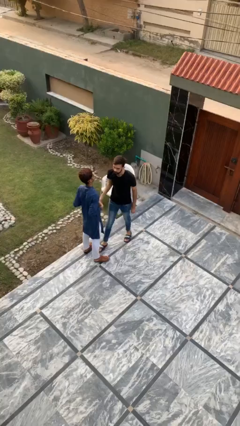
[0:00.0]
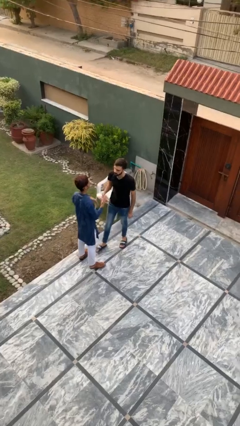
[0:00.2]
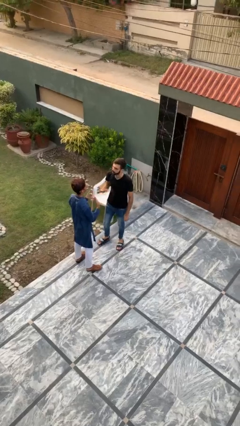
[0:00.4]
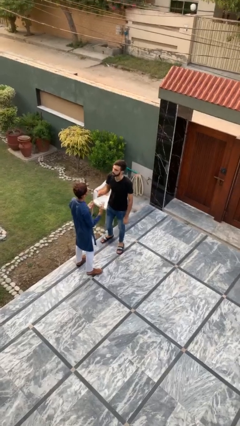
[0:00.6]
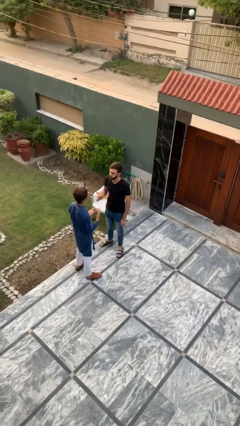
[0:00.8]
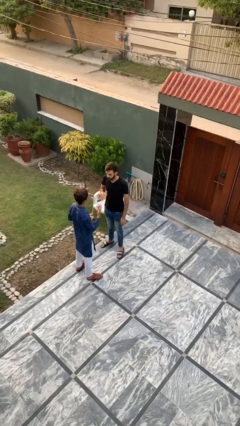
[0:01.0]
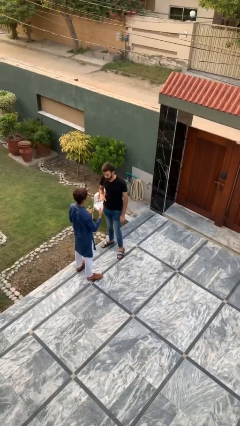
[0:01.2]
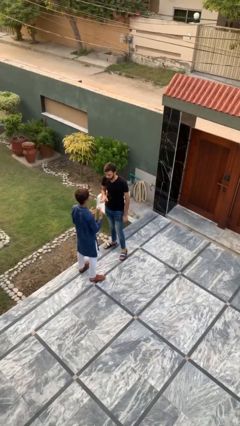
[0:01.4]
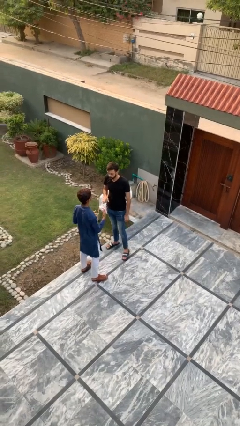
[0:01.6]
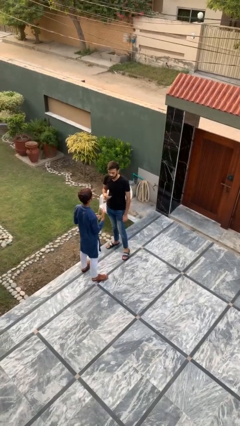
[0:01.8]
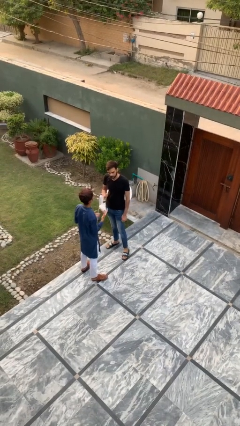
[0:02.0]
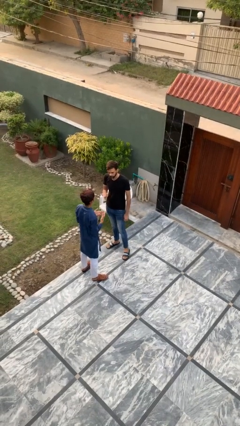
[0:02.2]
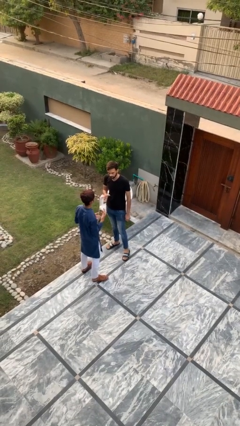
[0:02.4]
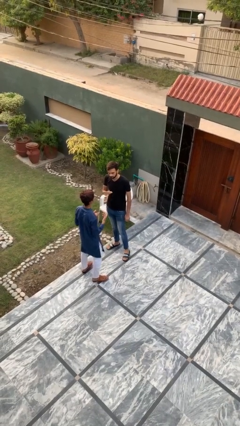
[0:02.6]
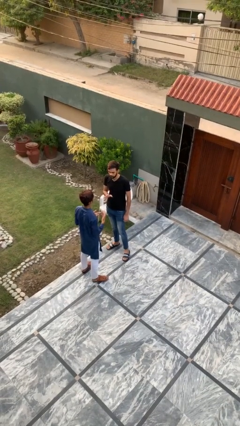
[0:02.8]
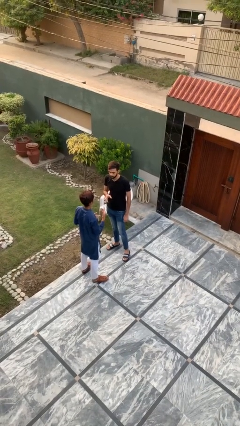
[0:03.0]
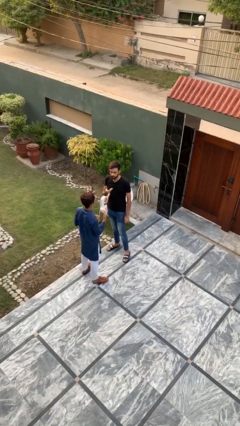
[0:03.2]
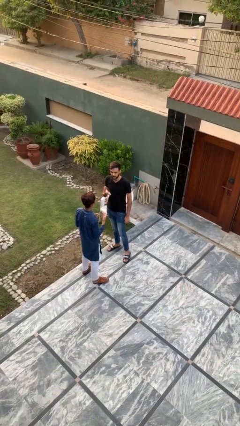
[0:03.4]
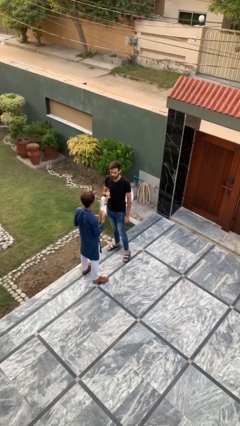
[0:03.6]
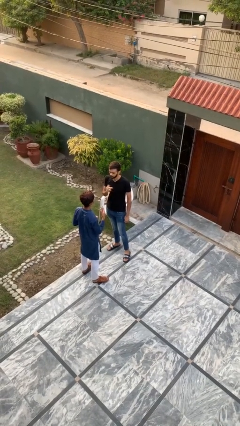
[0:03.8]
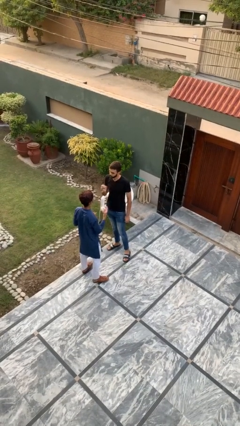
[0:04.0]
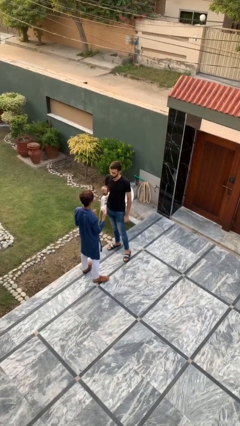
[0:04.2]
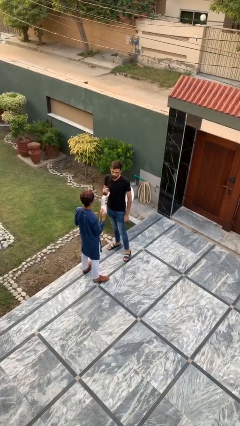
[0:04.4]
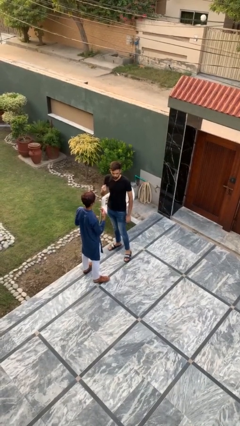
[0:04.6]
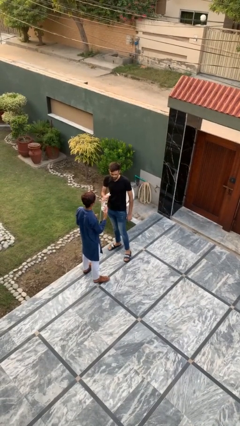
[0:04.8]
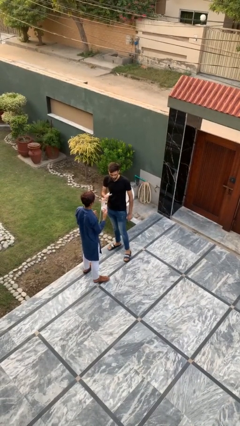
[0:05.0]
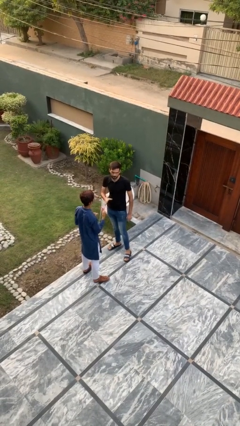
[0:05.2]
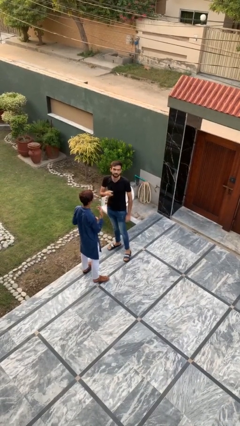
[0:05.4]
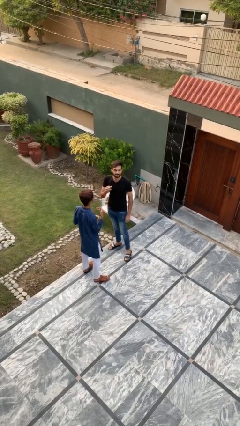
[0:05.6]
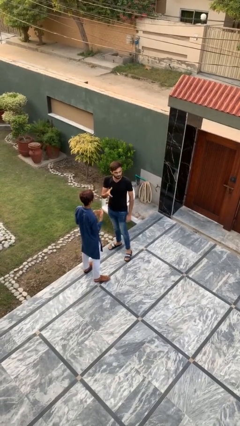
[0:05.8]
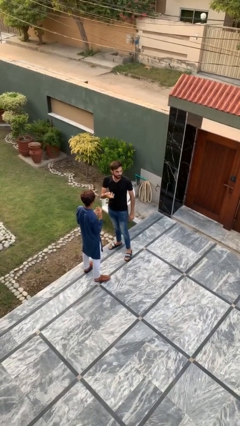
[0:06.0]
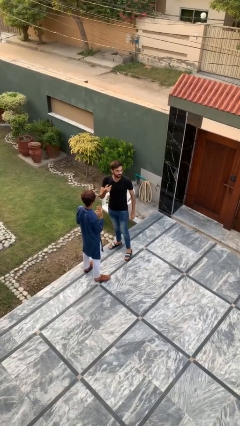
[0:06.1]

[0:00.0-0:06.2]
person talks to person

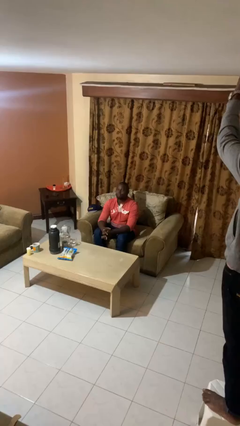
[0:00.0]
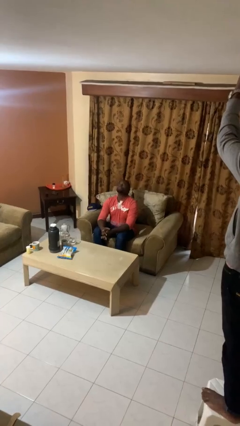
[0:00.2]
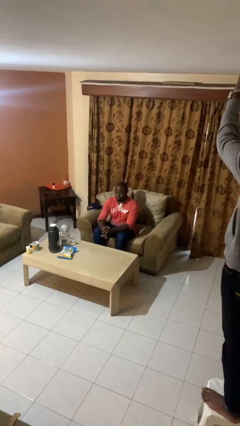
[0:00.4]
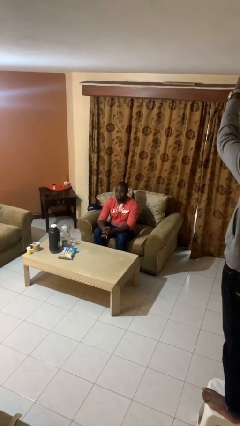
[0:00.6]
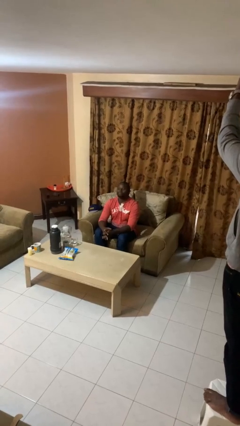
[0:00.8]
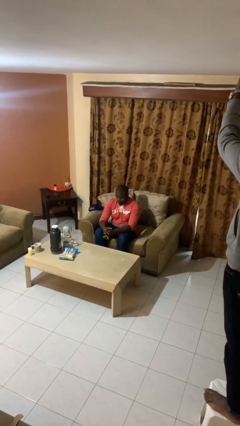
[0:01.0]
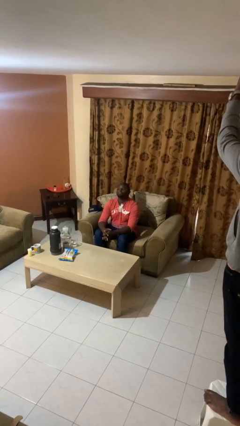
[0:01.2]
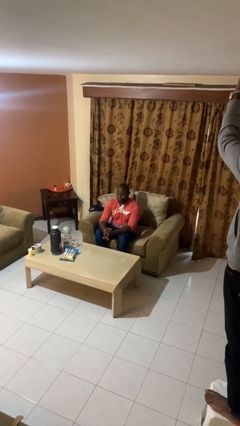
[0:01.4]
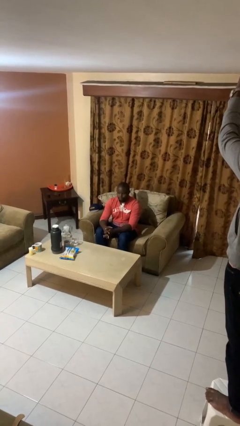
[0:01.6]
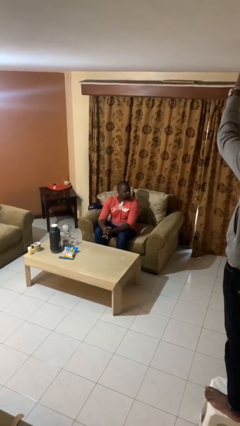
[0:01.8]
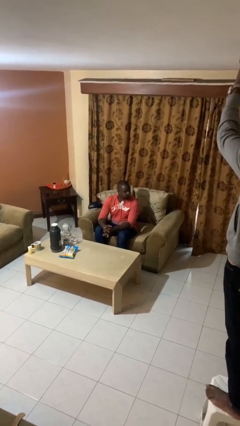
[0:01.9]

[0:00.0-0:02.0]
person nods head

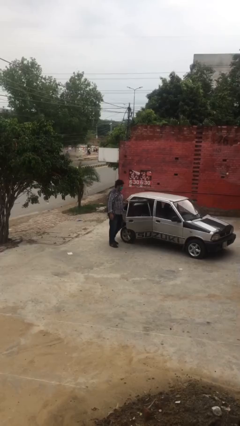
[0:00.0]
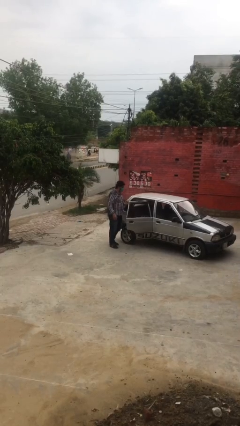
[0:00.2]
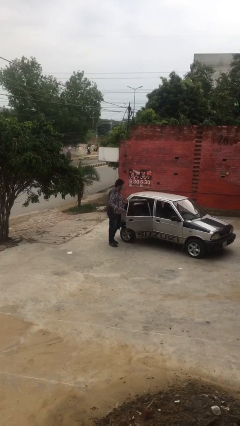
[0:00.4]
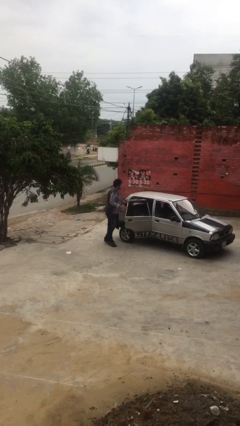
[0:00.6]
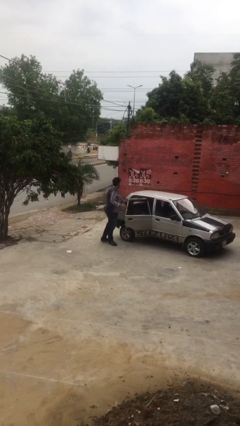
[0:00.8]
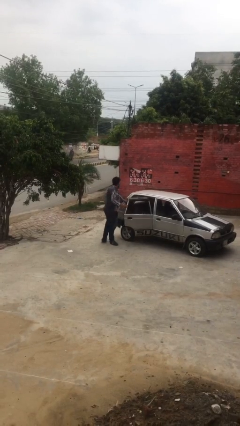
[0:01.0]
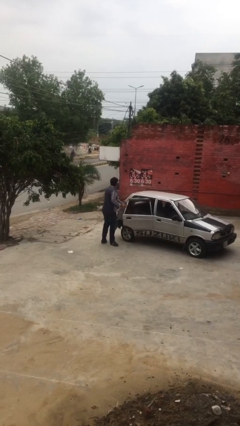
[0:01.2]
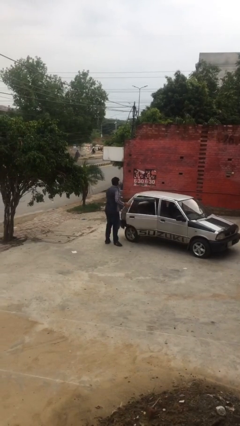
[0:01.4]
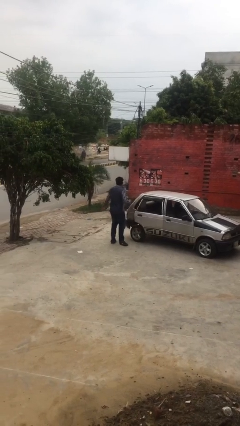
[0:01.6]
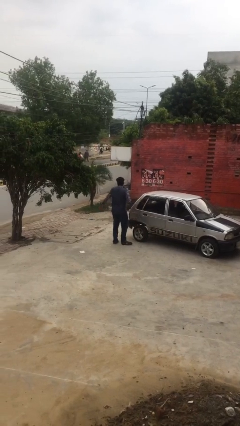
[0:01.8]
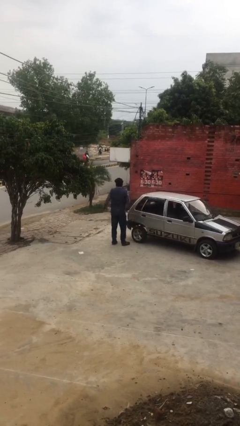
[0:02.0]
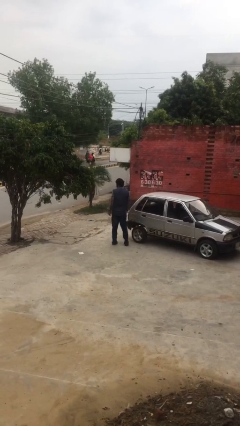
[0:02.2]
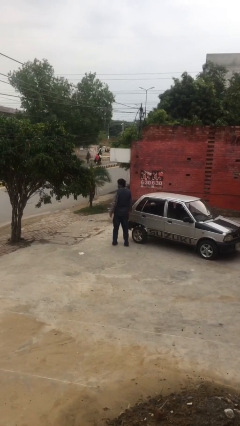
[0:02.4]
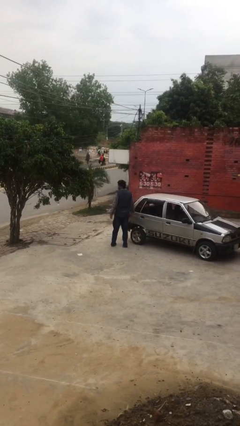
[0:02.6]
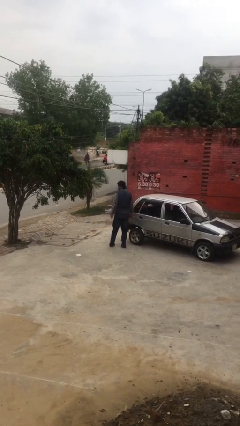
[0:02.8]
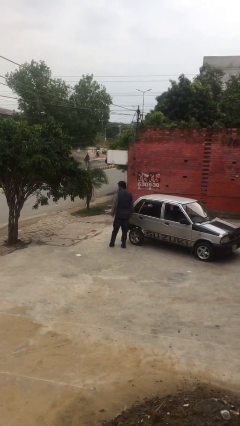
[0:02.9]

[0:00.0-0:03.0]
person closes car door

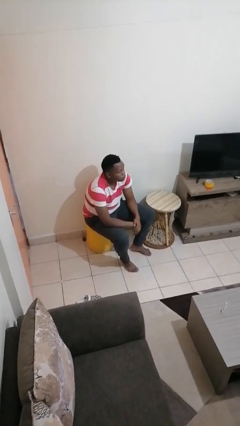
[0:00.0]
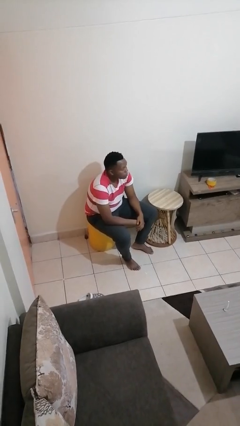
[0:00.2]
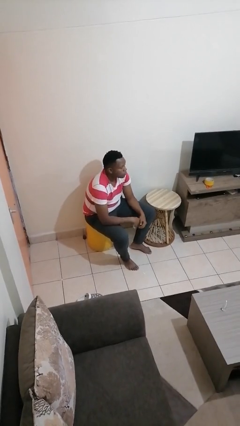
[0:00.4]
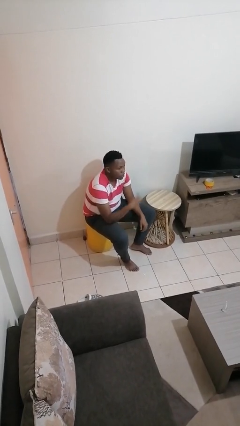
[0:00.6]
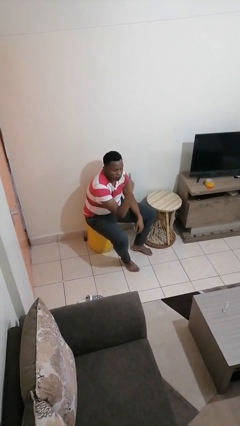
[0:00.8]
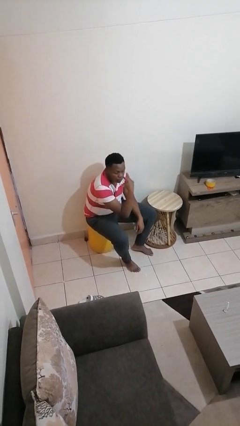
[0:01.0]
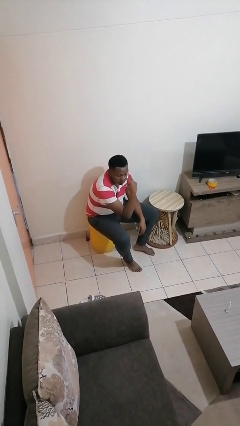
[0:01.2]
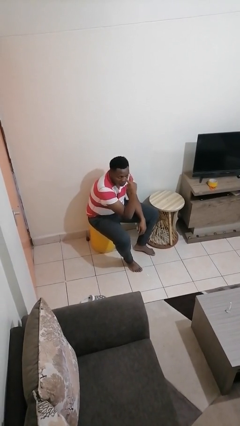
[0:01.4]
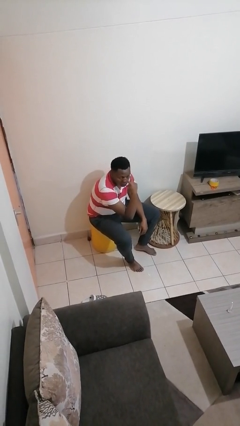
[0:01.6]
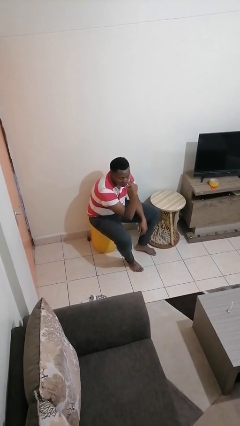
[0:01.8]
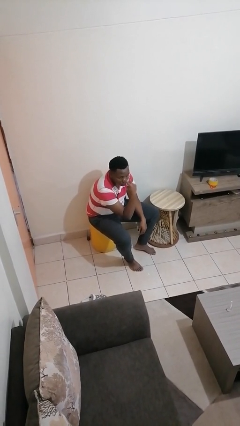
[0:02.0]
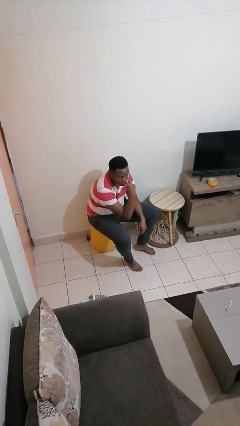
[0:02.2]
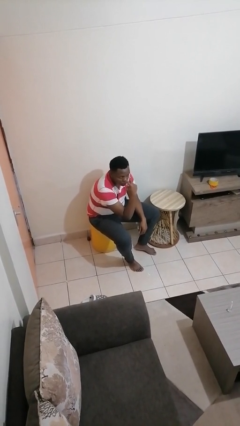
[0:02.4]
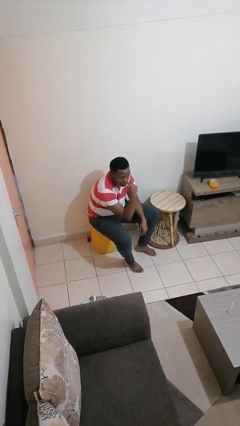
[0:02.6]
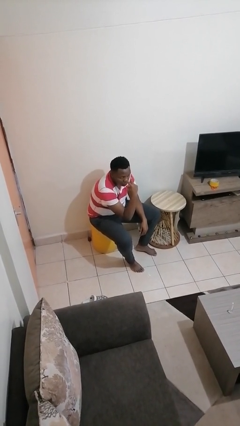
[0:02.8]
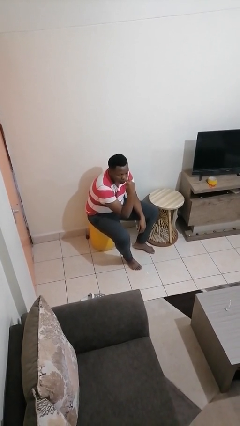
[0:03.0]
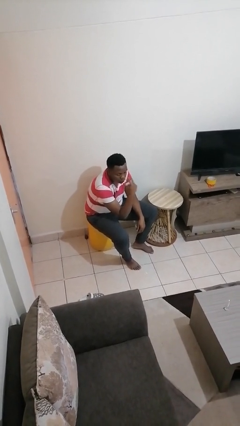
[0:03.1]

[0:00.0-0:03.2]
person gestures watch closely

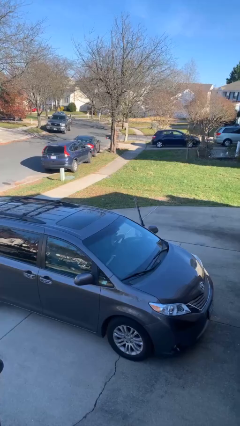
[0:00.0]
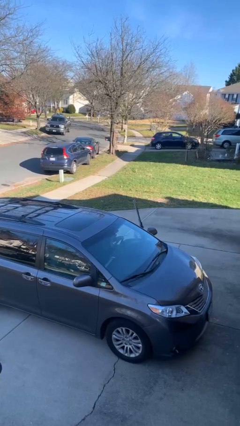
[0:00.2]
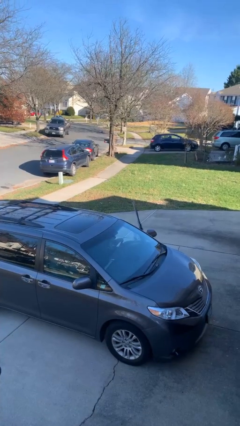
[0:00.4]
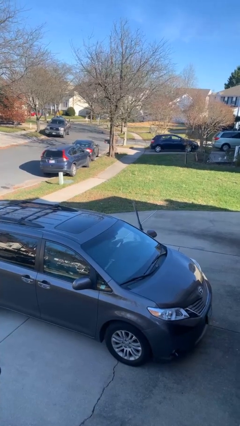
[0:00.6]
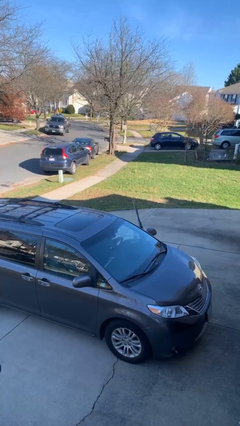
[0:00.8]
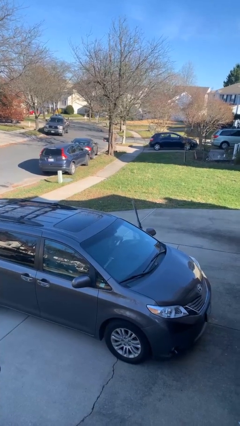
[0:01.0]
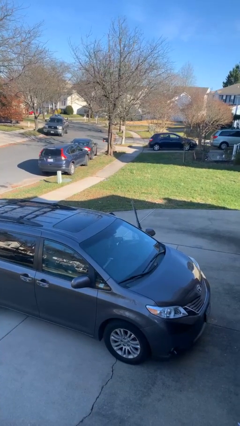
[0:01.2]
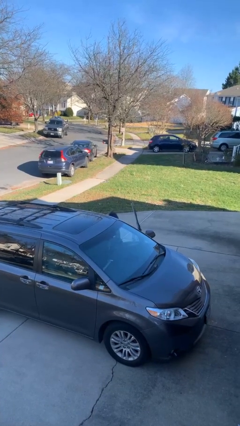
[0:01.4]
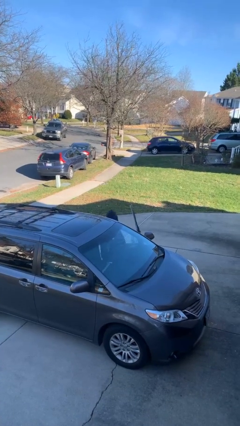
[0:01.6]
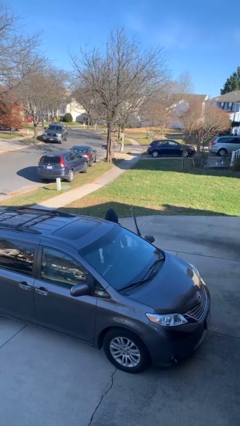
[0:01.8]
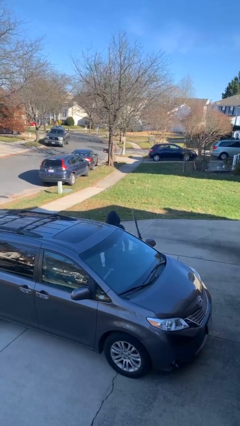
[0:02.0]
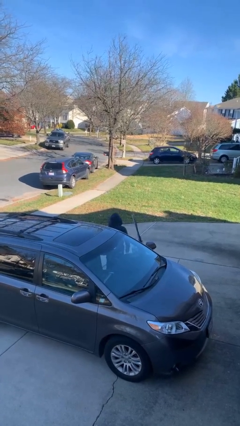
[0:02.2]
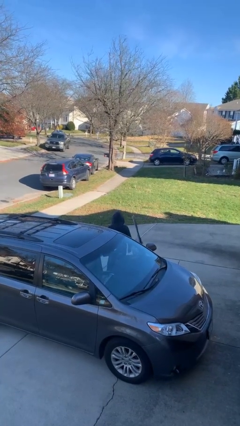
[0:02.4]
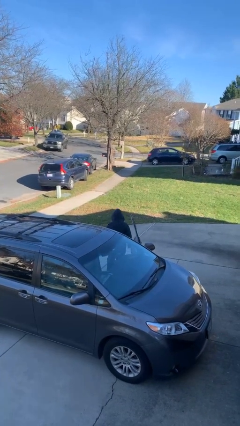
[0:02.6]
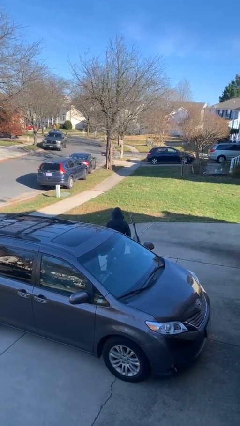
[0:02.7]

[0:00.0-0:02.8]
person exits car

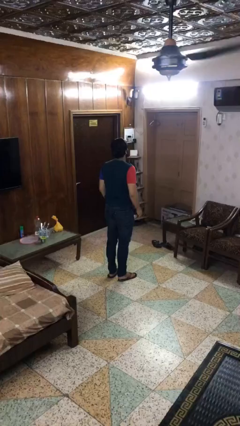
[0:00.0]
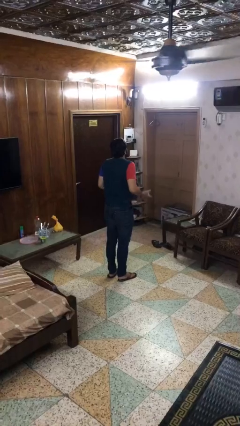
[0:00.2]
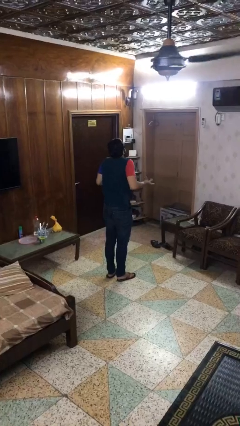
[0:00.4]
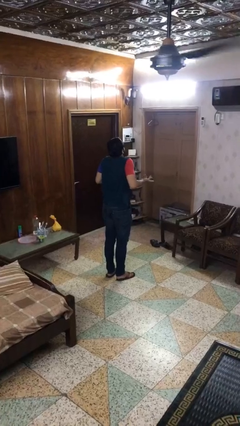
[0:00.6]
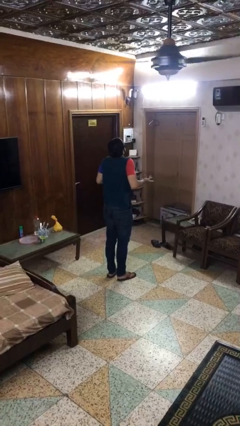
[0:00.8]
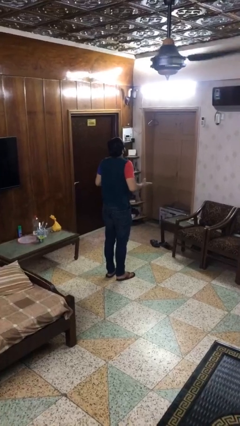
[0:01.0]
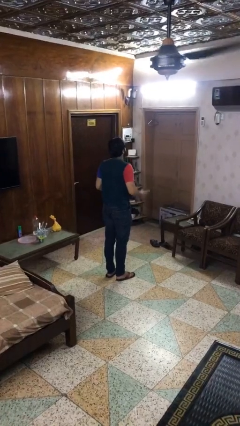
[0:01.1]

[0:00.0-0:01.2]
person shrugs
